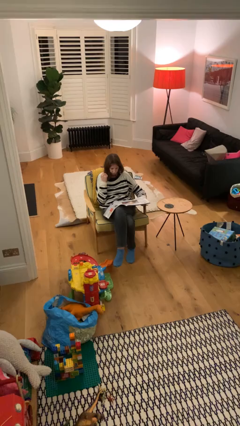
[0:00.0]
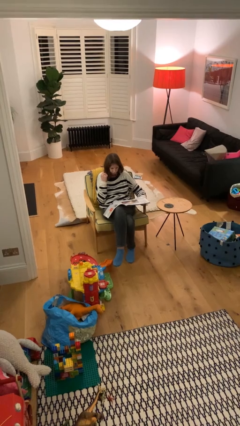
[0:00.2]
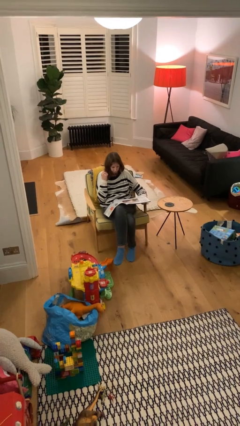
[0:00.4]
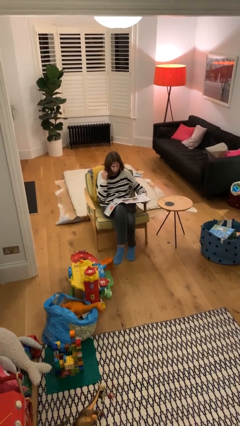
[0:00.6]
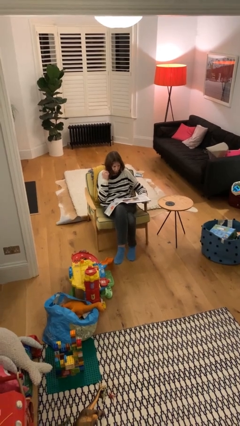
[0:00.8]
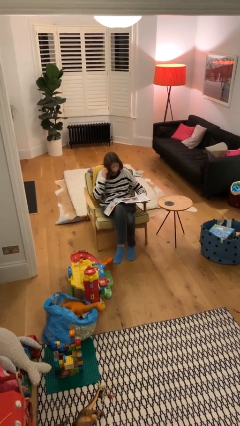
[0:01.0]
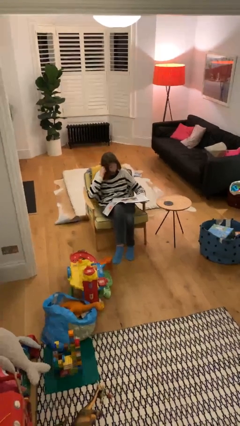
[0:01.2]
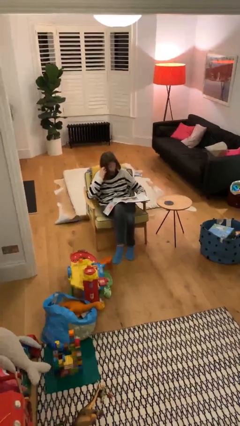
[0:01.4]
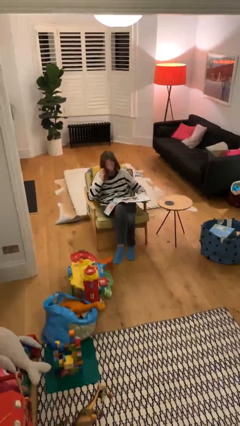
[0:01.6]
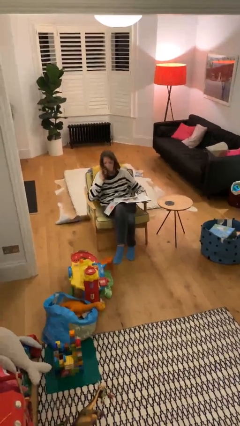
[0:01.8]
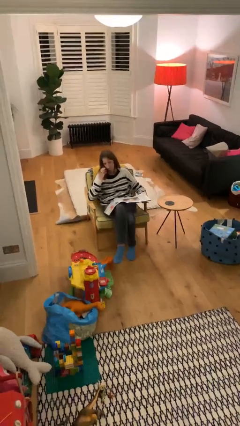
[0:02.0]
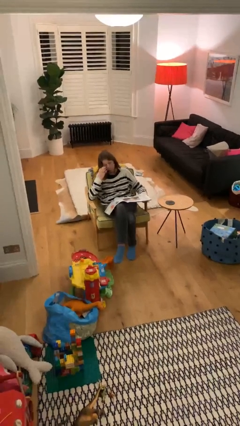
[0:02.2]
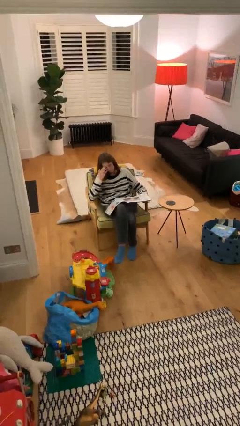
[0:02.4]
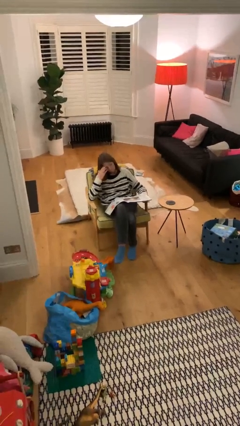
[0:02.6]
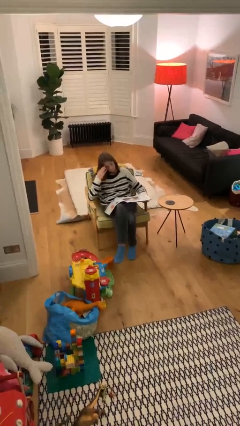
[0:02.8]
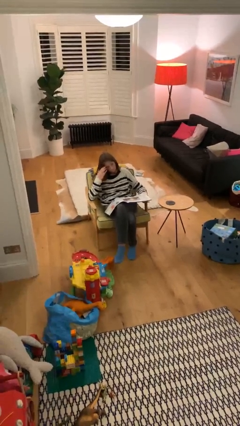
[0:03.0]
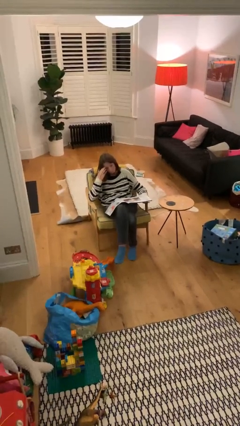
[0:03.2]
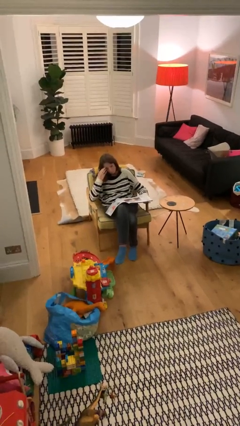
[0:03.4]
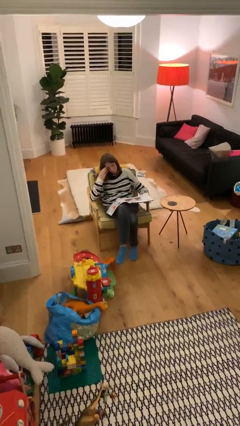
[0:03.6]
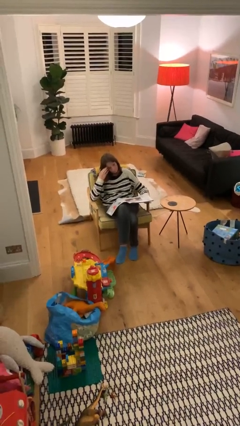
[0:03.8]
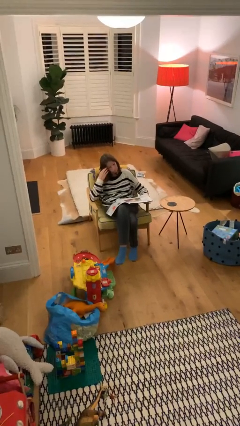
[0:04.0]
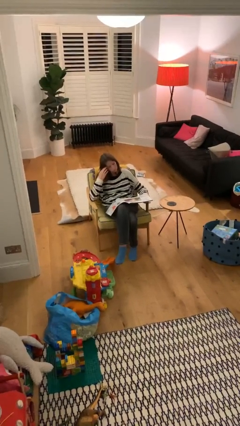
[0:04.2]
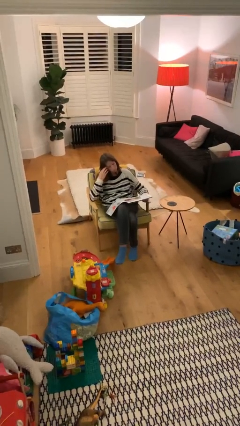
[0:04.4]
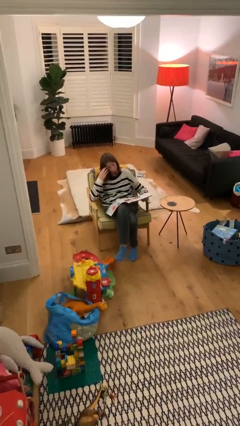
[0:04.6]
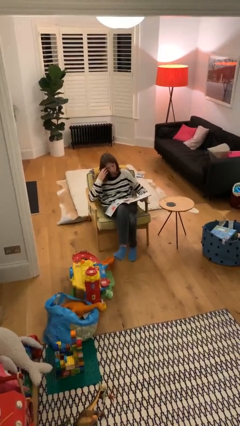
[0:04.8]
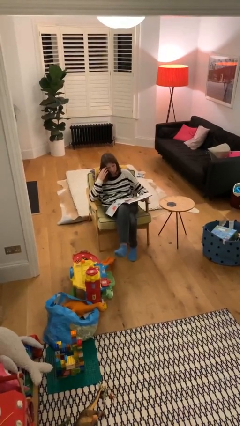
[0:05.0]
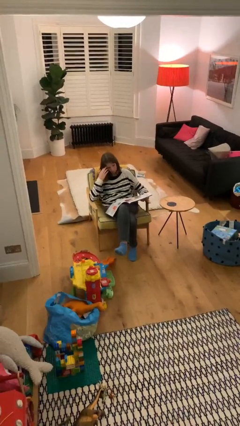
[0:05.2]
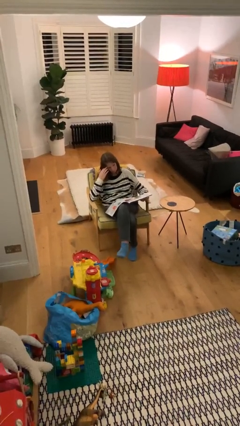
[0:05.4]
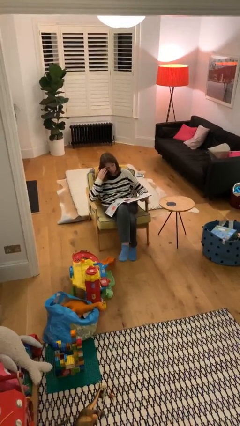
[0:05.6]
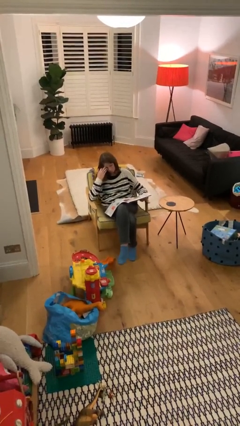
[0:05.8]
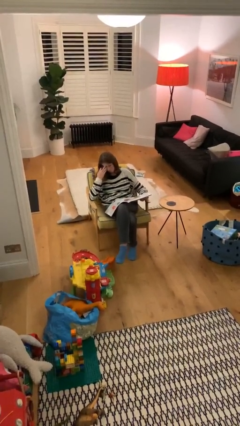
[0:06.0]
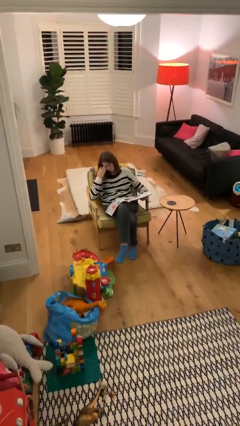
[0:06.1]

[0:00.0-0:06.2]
person reads document

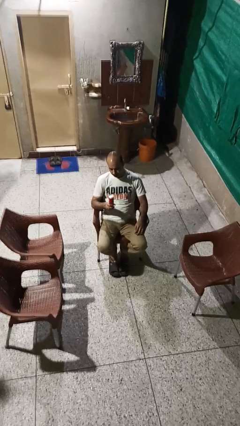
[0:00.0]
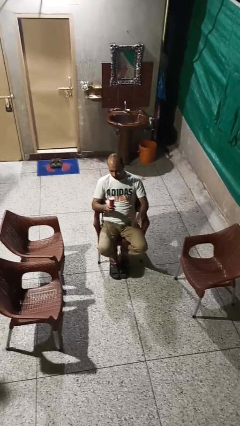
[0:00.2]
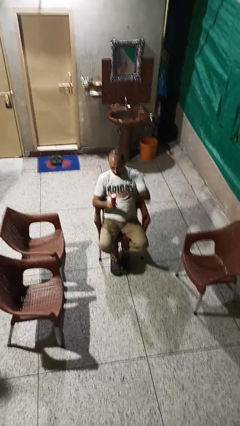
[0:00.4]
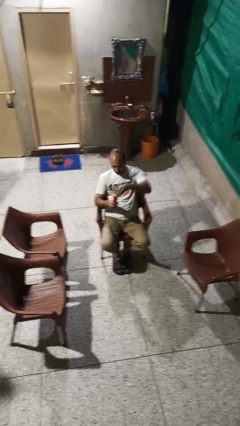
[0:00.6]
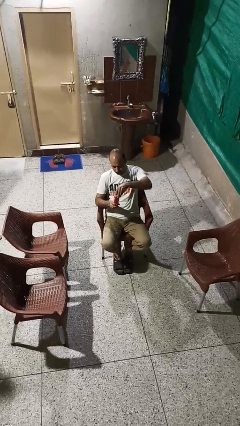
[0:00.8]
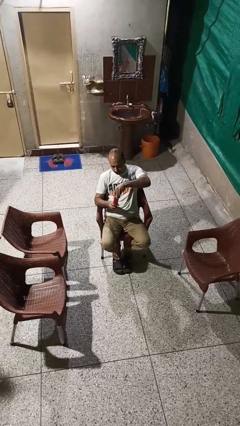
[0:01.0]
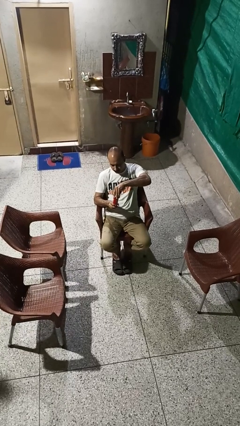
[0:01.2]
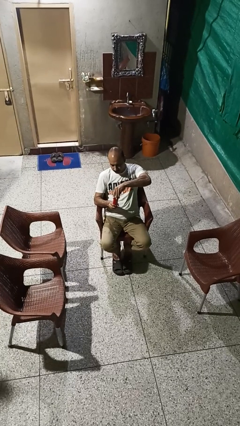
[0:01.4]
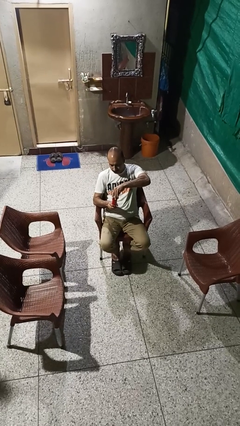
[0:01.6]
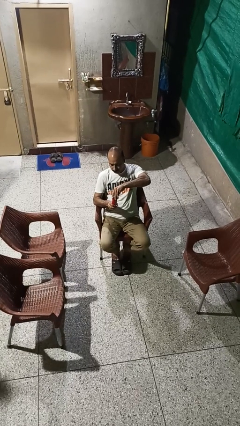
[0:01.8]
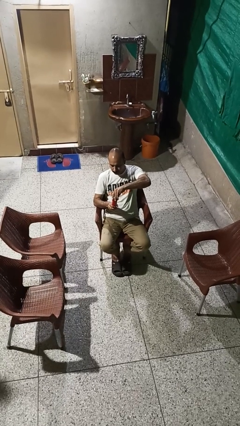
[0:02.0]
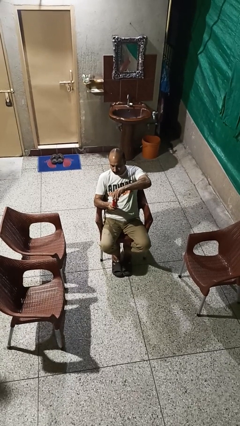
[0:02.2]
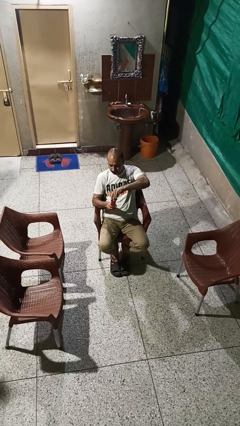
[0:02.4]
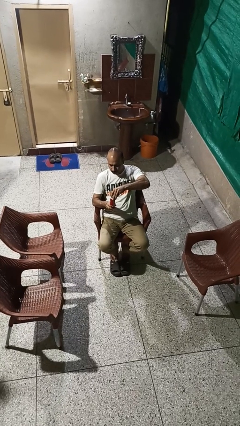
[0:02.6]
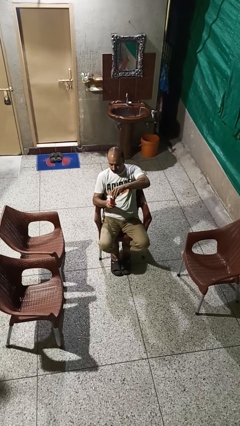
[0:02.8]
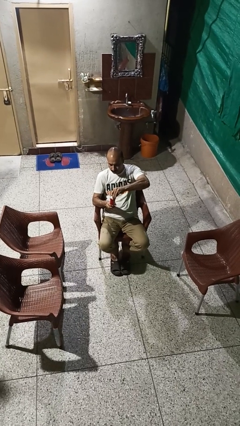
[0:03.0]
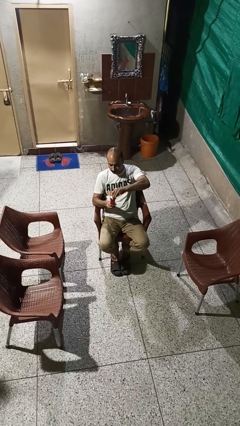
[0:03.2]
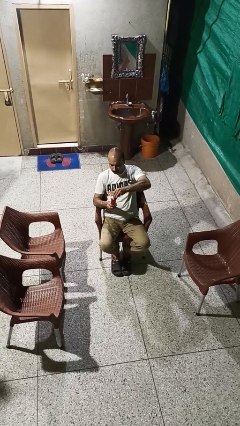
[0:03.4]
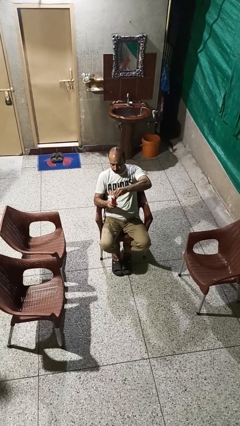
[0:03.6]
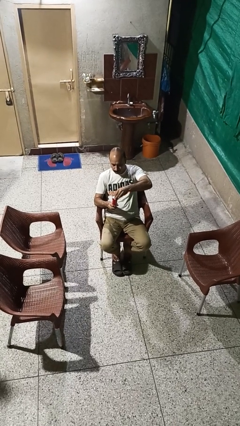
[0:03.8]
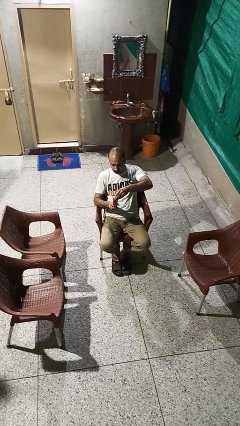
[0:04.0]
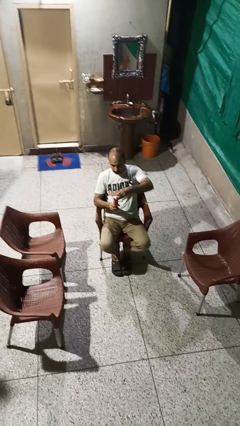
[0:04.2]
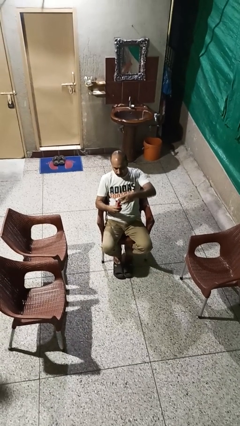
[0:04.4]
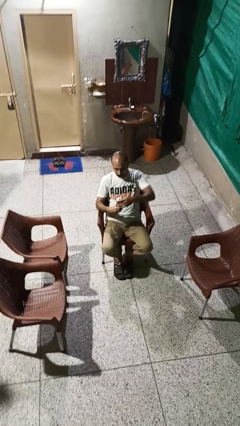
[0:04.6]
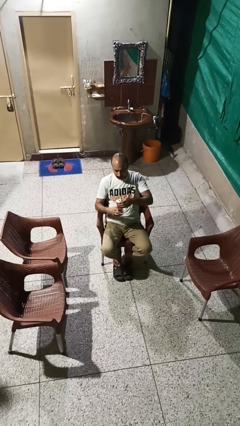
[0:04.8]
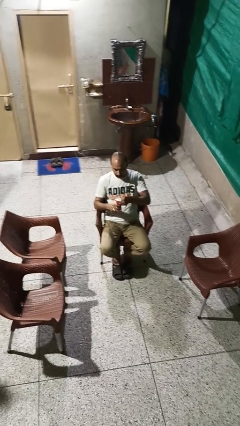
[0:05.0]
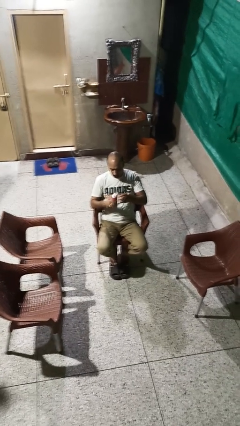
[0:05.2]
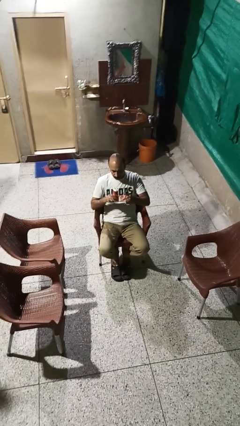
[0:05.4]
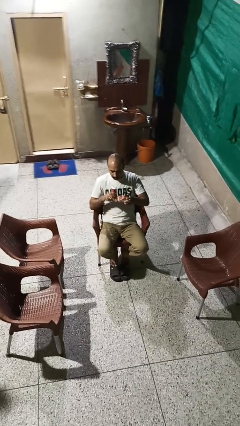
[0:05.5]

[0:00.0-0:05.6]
person opens beverage can

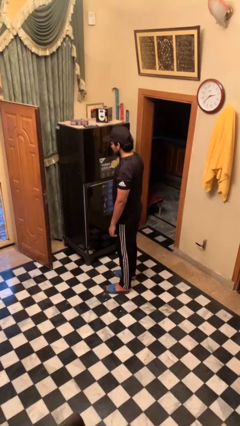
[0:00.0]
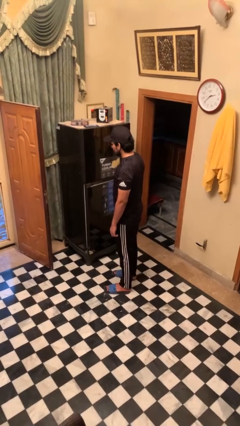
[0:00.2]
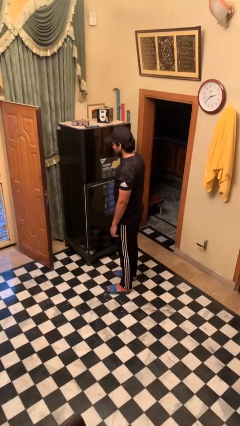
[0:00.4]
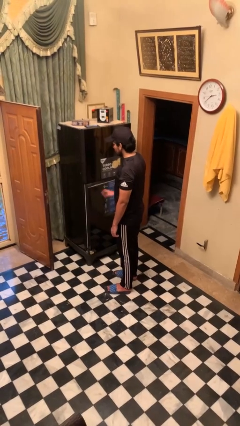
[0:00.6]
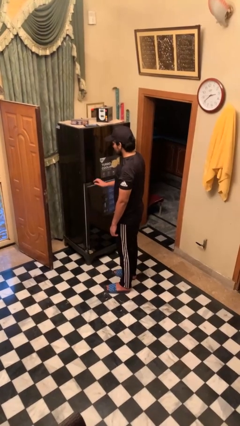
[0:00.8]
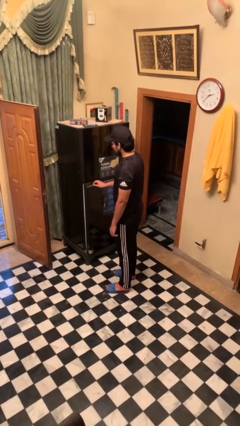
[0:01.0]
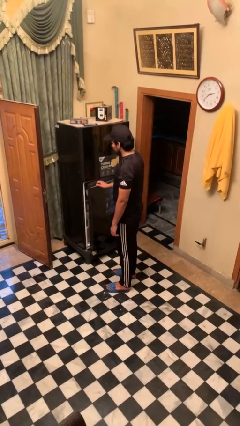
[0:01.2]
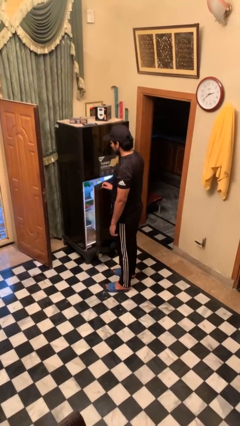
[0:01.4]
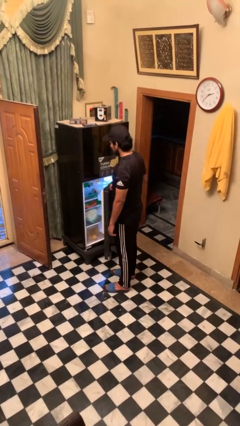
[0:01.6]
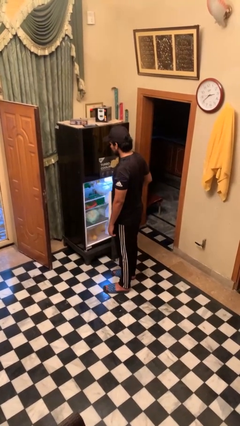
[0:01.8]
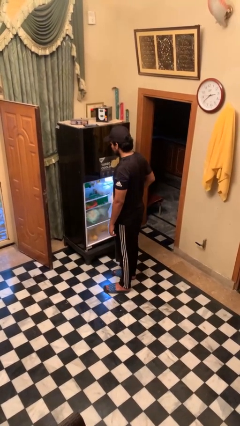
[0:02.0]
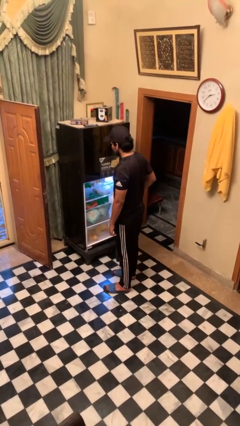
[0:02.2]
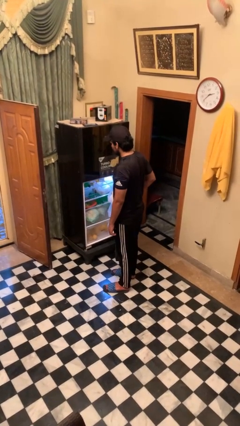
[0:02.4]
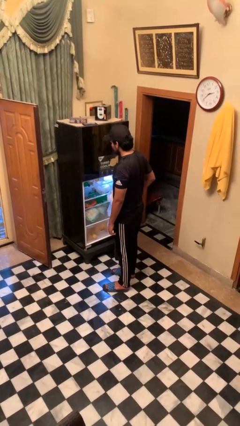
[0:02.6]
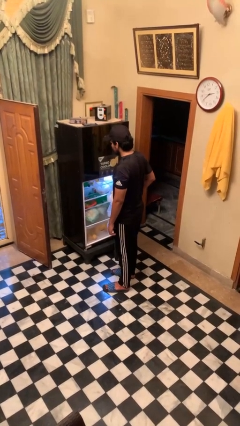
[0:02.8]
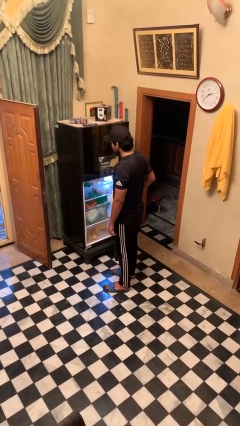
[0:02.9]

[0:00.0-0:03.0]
person opens refrigerator

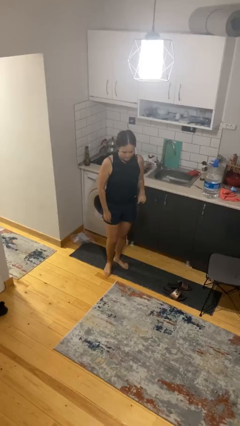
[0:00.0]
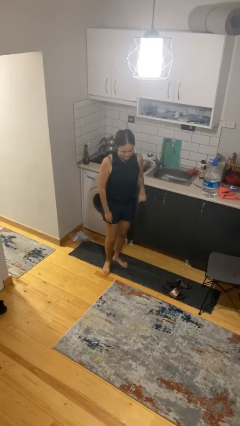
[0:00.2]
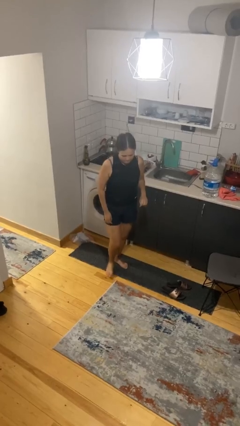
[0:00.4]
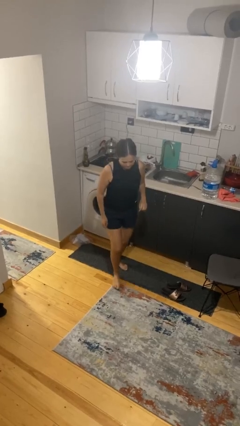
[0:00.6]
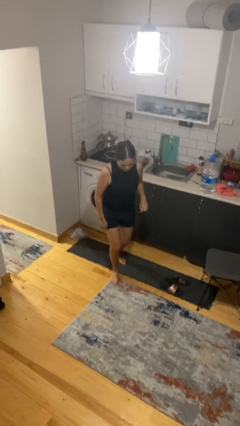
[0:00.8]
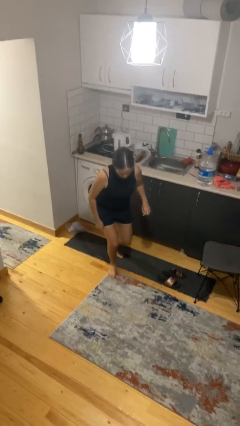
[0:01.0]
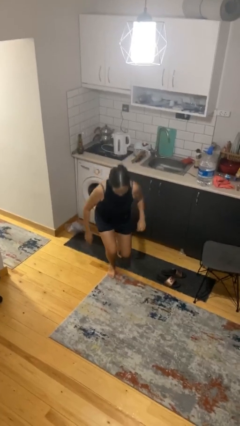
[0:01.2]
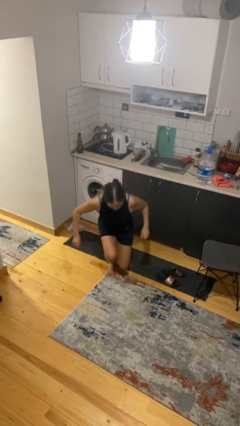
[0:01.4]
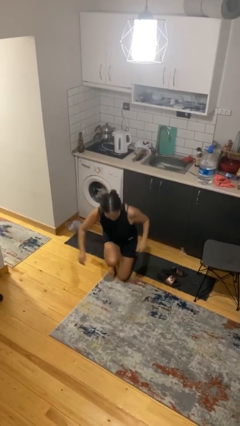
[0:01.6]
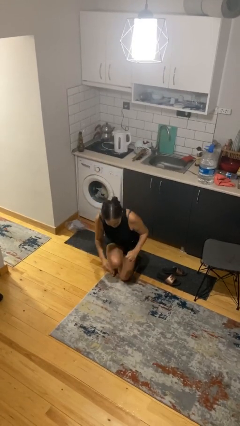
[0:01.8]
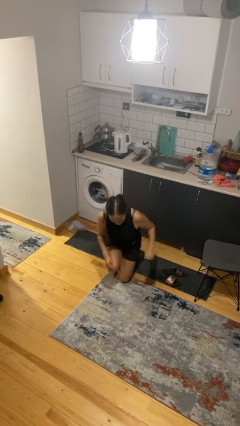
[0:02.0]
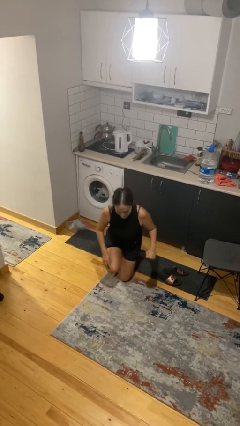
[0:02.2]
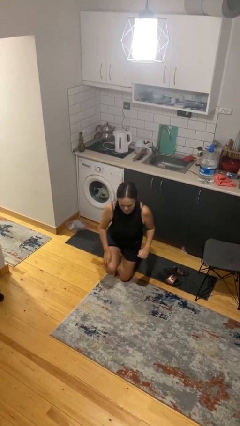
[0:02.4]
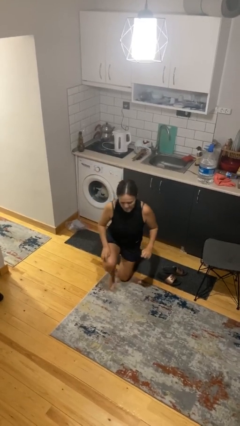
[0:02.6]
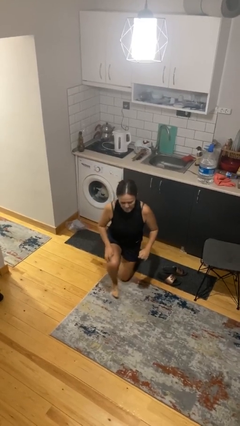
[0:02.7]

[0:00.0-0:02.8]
person kneels
